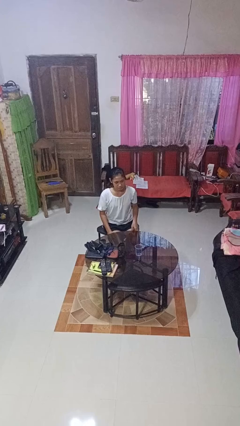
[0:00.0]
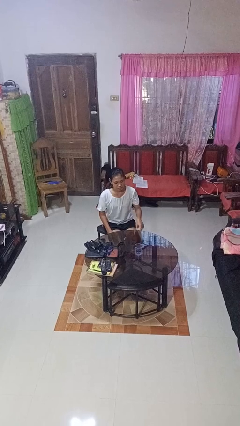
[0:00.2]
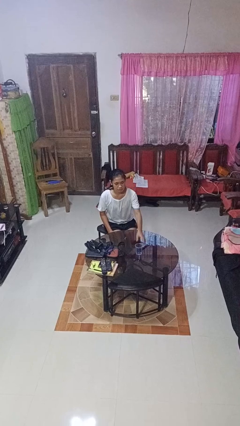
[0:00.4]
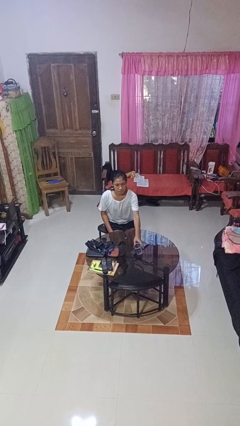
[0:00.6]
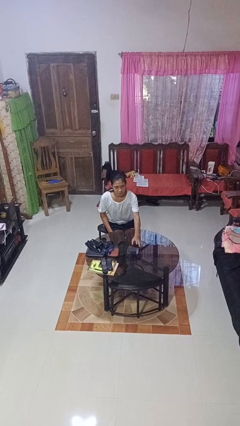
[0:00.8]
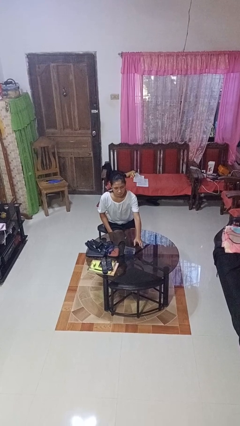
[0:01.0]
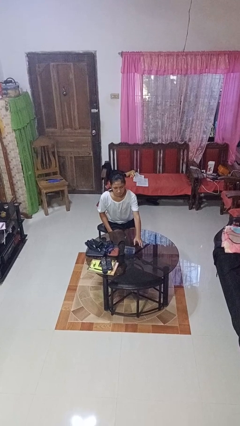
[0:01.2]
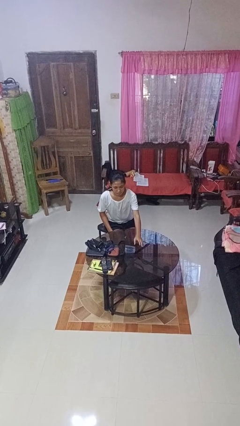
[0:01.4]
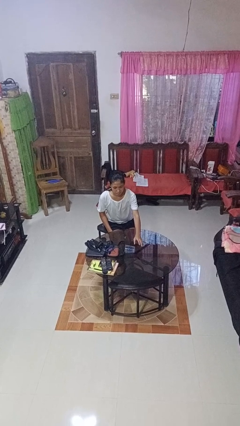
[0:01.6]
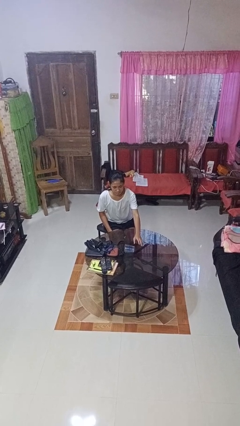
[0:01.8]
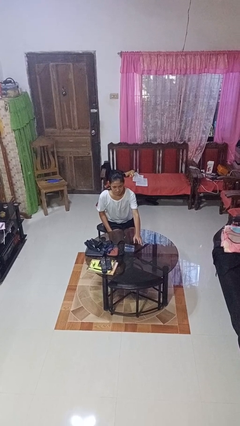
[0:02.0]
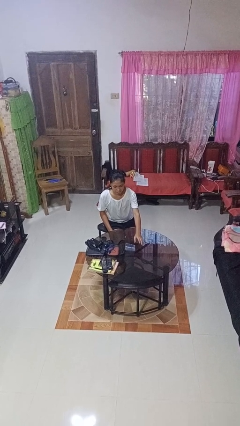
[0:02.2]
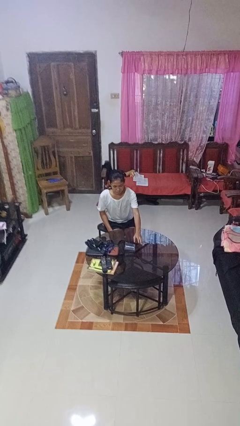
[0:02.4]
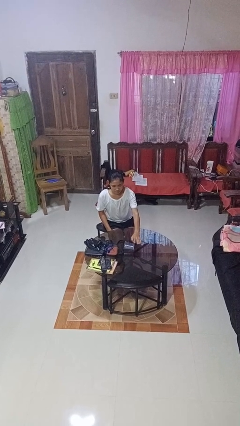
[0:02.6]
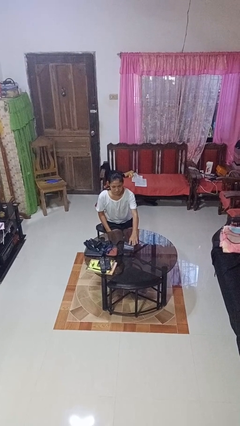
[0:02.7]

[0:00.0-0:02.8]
person knocks over glass

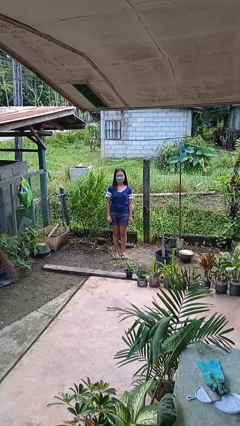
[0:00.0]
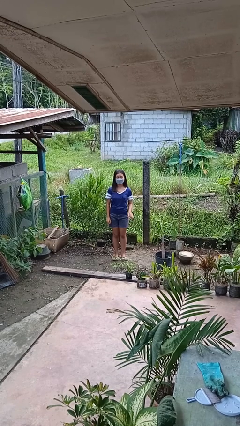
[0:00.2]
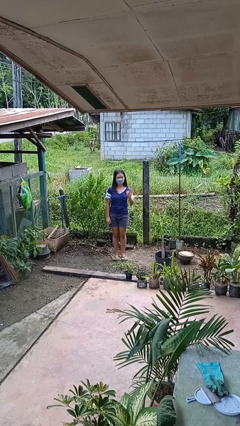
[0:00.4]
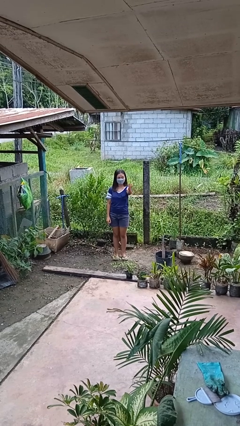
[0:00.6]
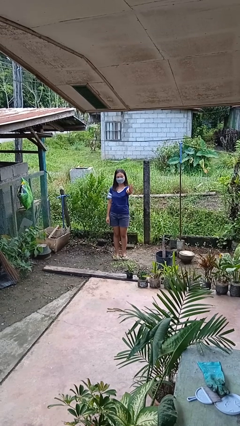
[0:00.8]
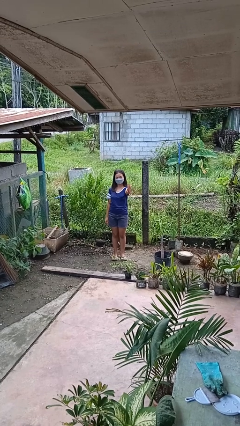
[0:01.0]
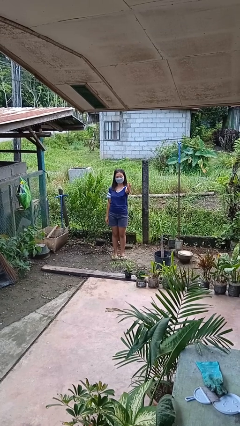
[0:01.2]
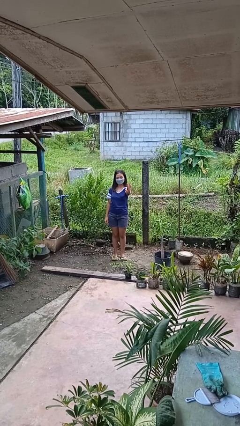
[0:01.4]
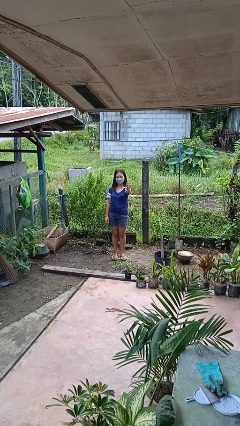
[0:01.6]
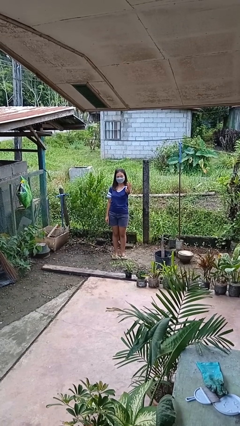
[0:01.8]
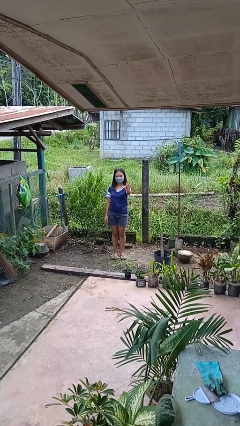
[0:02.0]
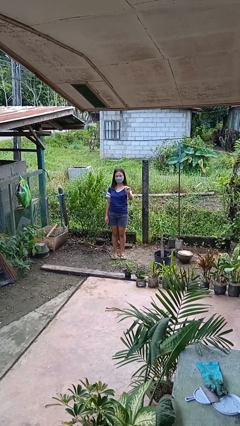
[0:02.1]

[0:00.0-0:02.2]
person gestures number three

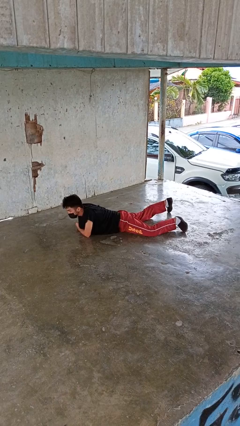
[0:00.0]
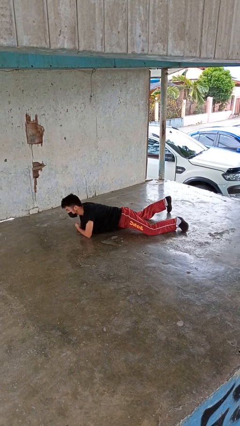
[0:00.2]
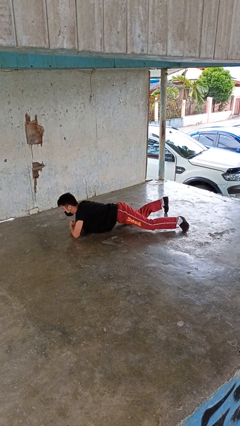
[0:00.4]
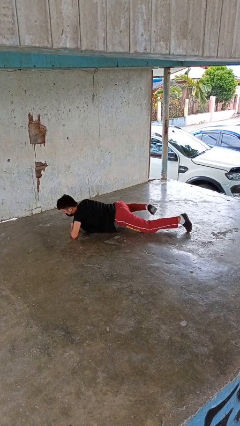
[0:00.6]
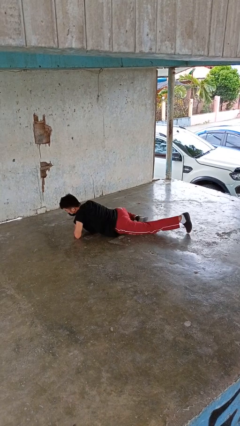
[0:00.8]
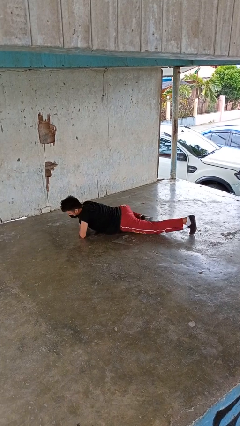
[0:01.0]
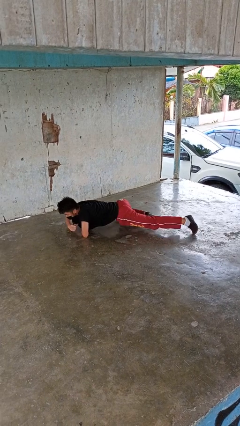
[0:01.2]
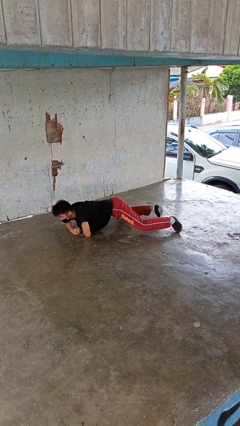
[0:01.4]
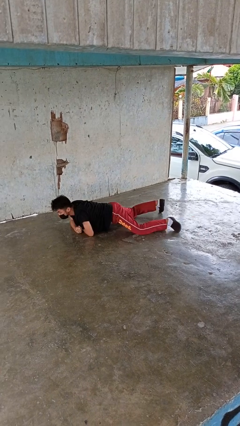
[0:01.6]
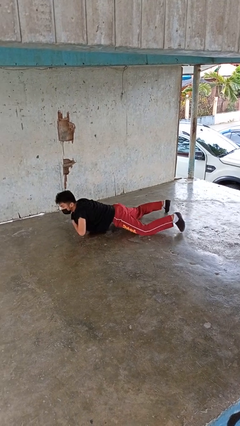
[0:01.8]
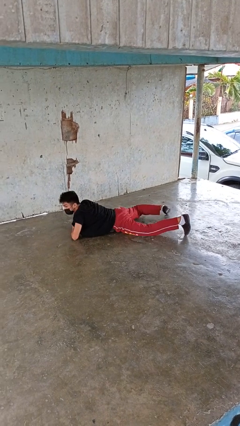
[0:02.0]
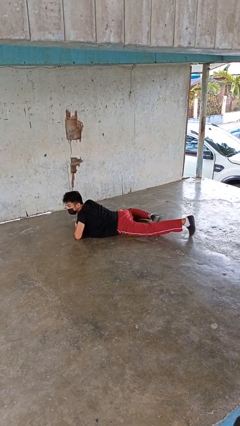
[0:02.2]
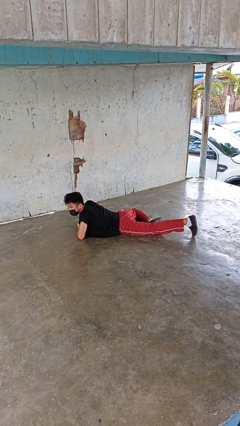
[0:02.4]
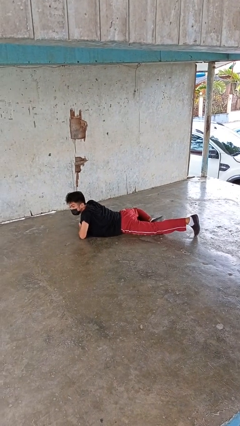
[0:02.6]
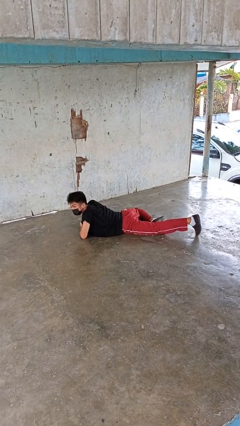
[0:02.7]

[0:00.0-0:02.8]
person crawls

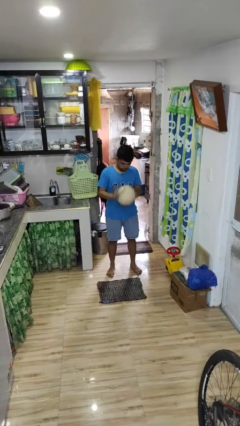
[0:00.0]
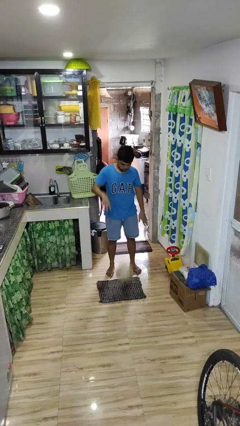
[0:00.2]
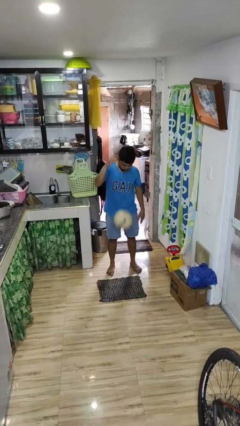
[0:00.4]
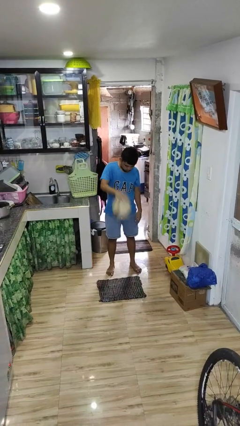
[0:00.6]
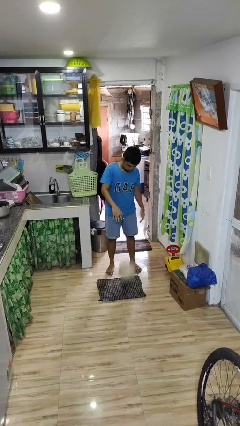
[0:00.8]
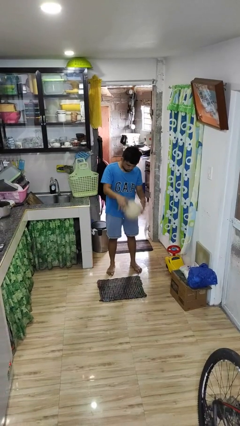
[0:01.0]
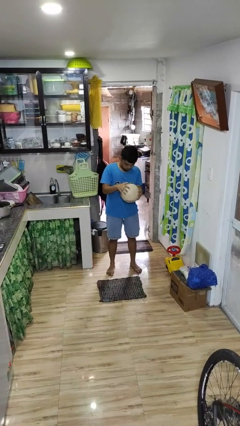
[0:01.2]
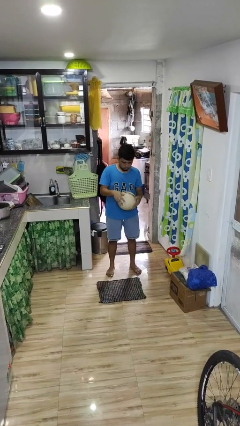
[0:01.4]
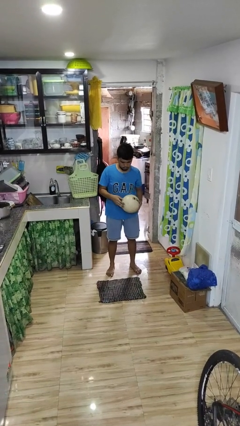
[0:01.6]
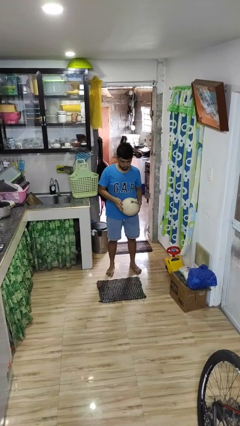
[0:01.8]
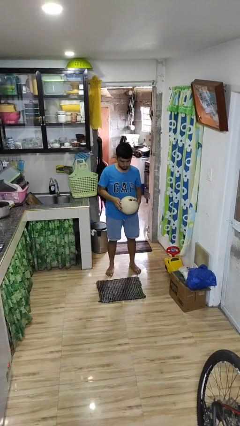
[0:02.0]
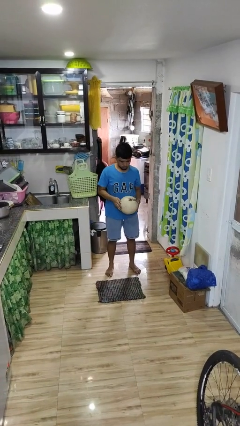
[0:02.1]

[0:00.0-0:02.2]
person bounces ball on floor

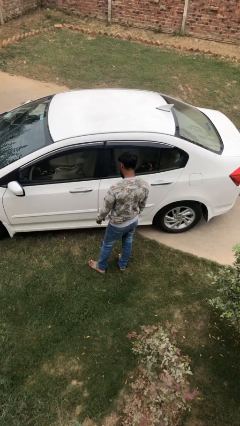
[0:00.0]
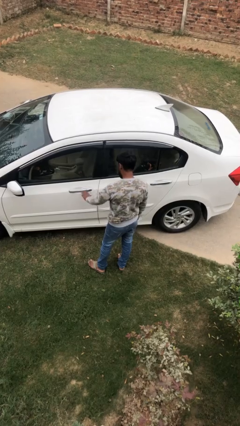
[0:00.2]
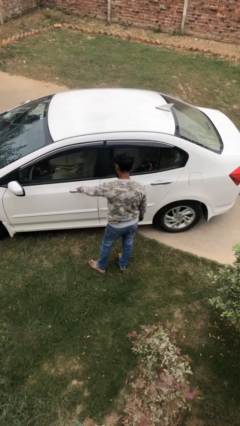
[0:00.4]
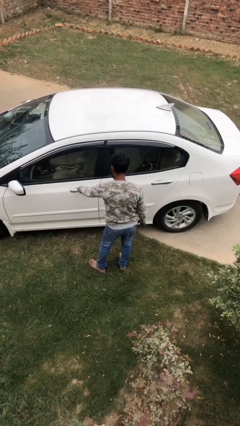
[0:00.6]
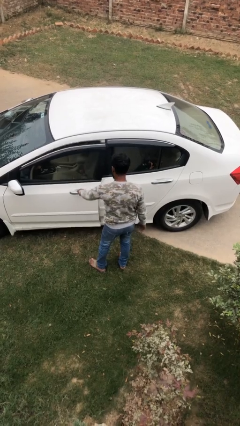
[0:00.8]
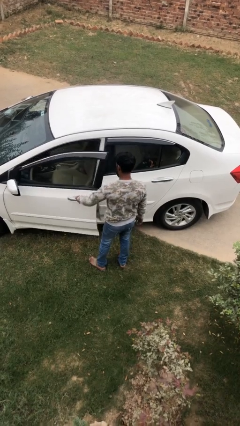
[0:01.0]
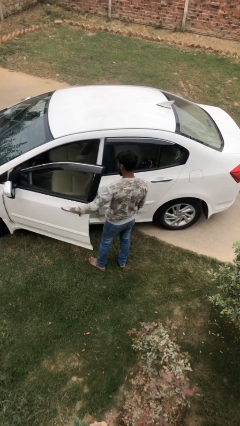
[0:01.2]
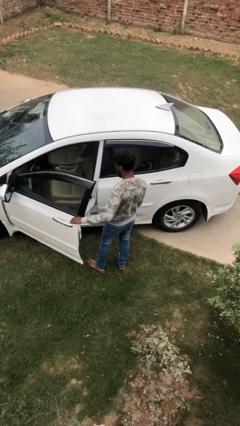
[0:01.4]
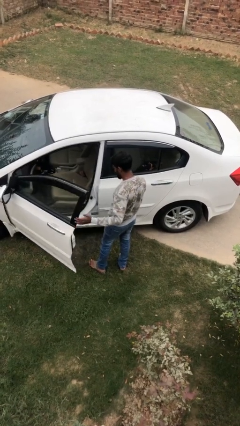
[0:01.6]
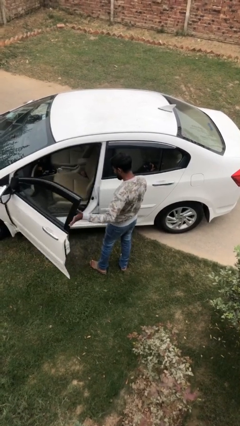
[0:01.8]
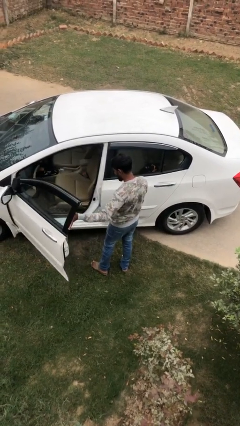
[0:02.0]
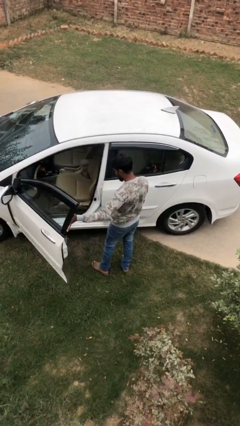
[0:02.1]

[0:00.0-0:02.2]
person opens car door

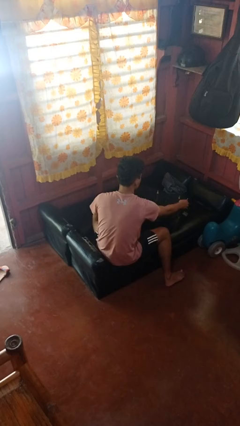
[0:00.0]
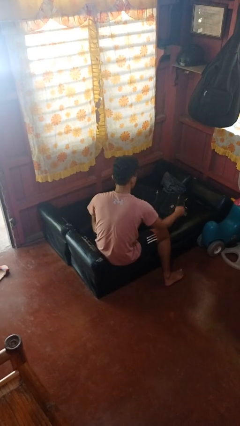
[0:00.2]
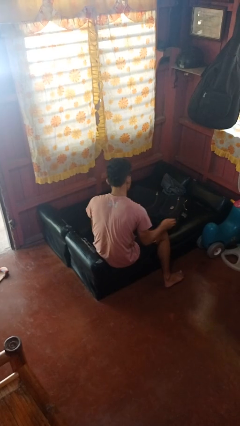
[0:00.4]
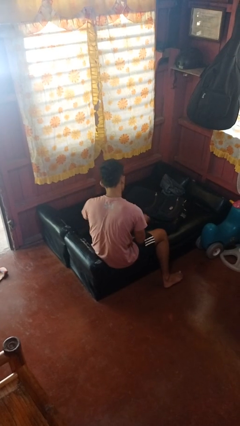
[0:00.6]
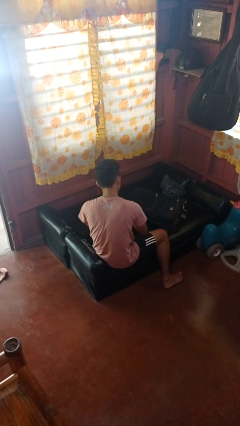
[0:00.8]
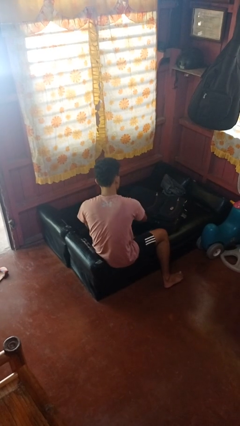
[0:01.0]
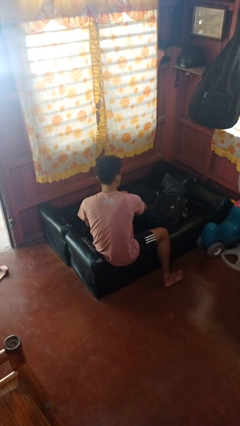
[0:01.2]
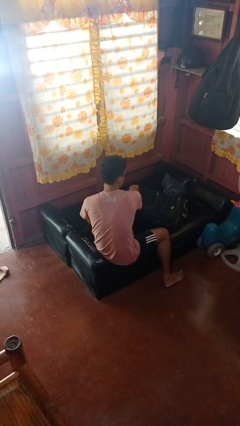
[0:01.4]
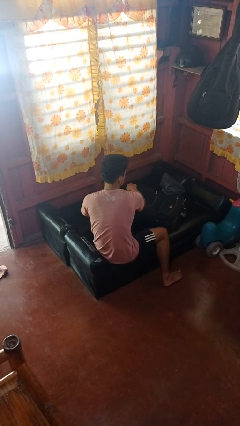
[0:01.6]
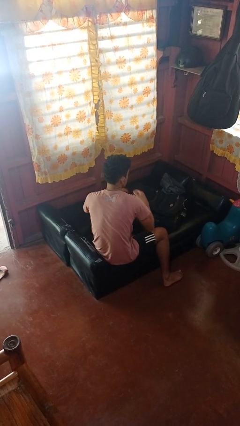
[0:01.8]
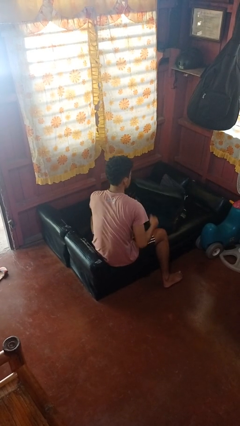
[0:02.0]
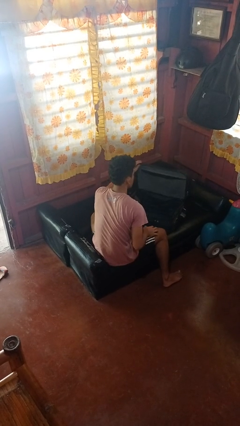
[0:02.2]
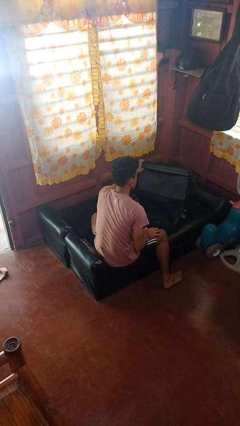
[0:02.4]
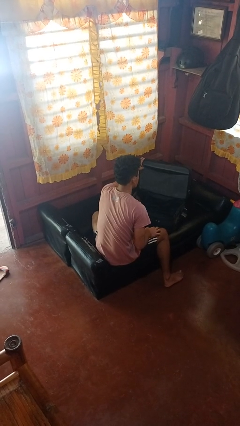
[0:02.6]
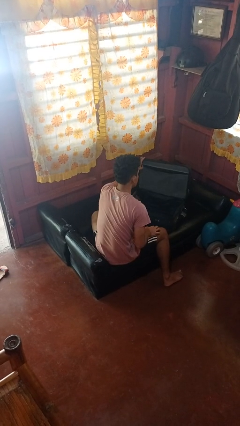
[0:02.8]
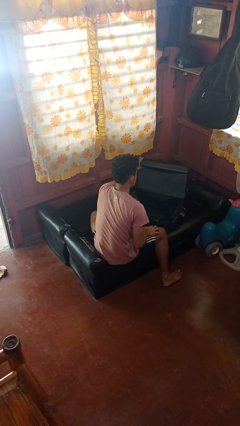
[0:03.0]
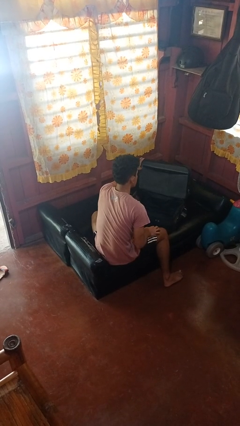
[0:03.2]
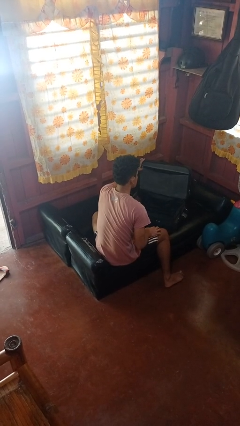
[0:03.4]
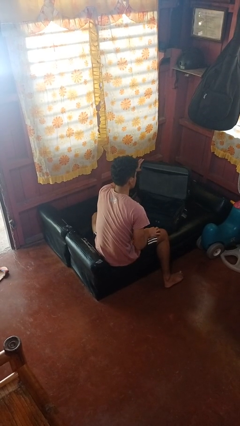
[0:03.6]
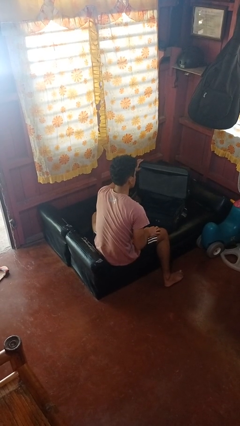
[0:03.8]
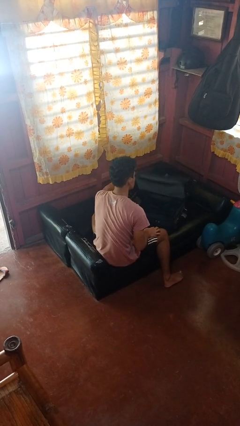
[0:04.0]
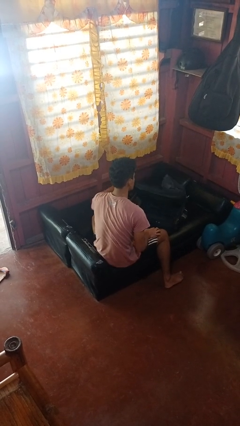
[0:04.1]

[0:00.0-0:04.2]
person opens suitcase

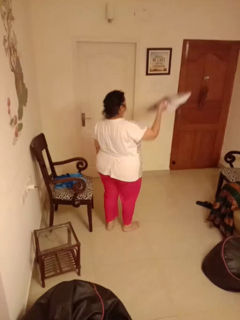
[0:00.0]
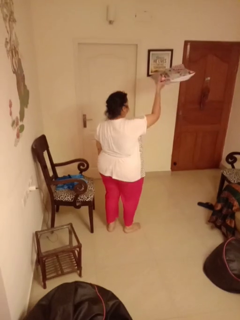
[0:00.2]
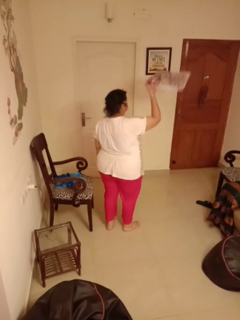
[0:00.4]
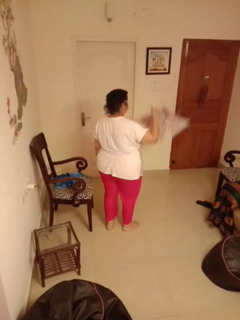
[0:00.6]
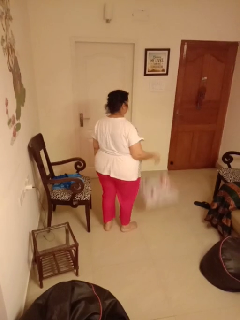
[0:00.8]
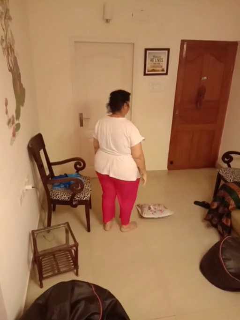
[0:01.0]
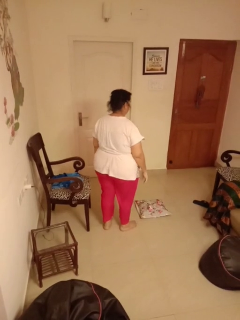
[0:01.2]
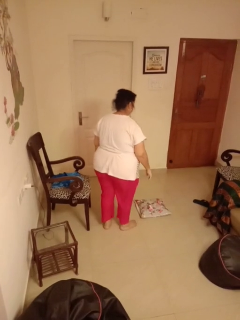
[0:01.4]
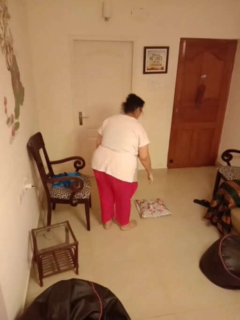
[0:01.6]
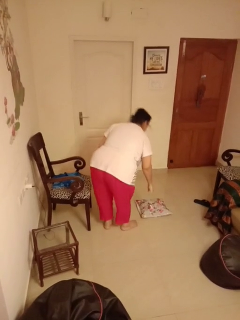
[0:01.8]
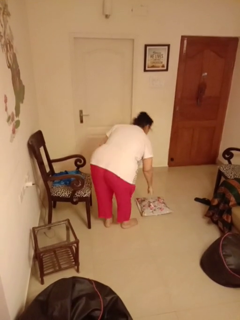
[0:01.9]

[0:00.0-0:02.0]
person throws object into air
